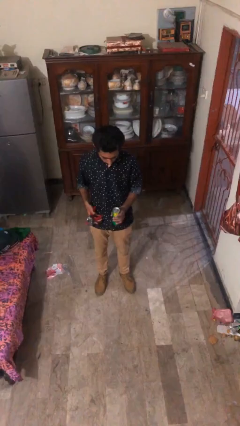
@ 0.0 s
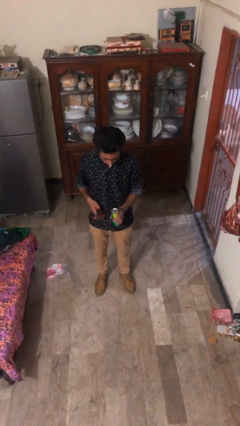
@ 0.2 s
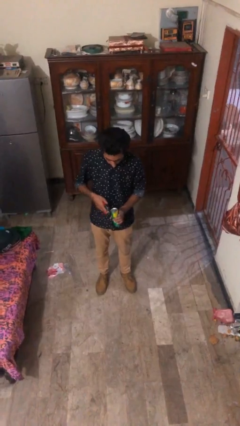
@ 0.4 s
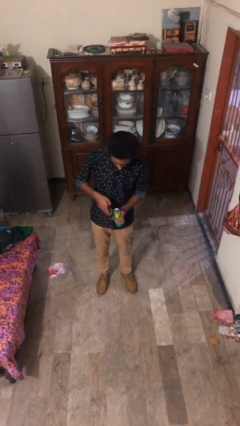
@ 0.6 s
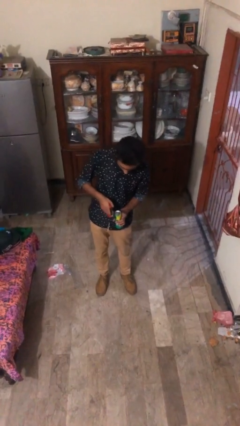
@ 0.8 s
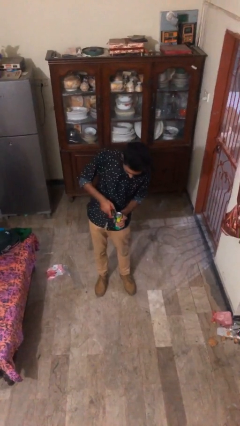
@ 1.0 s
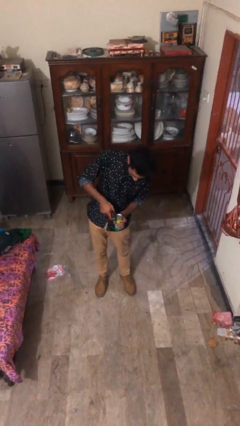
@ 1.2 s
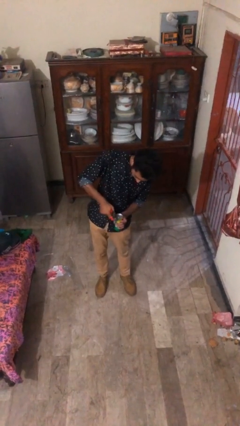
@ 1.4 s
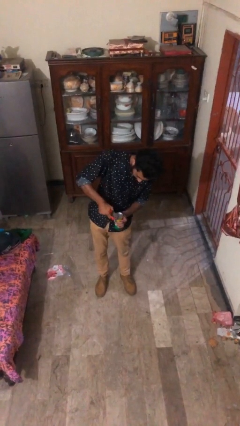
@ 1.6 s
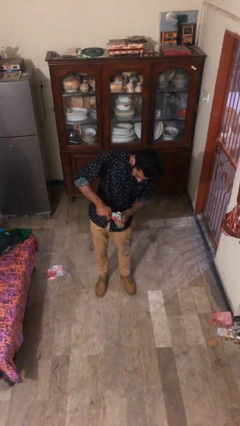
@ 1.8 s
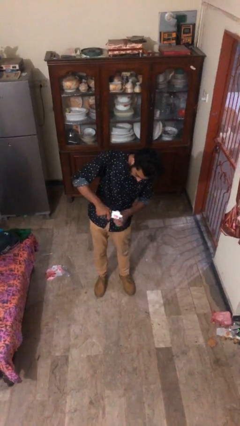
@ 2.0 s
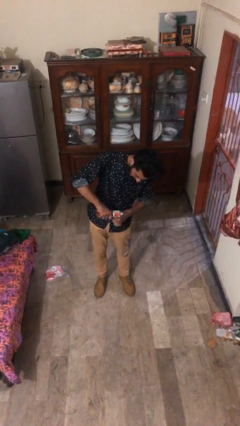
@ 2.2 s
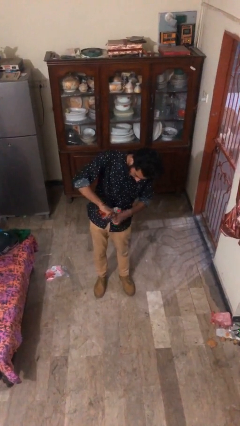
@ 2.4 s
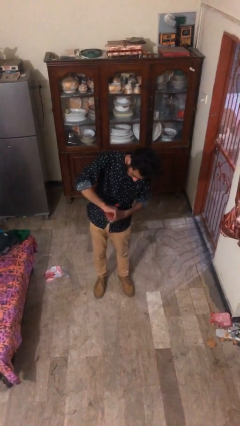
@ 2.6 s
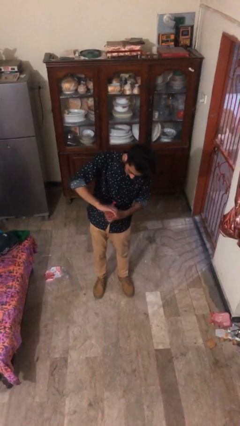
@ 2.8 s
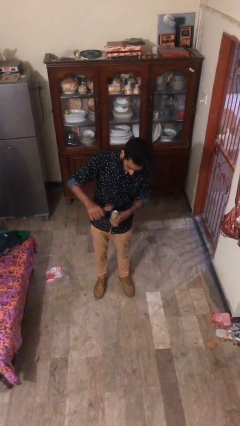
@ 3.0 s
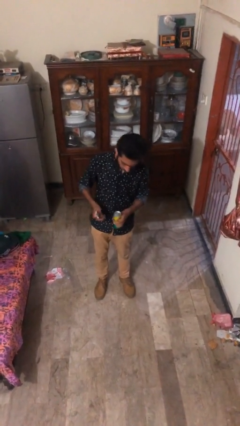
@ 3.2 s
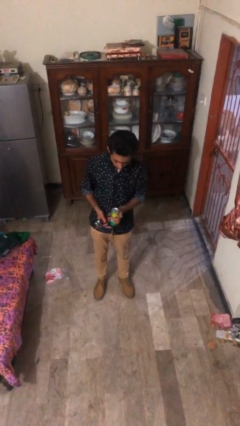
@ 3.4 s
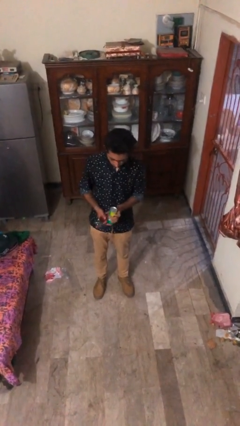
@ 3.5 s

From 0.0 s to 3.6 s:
person opens can with can opener

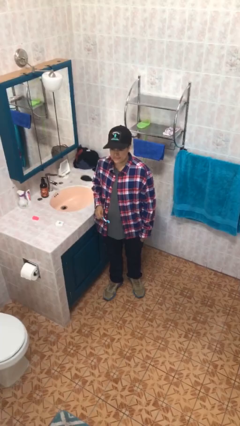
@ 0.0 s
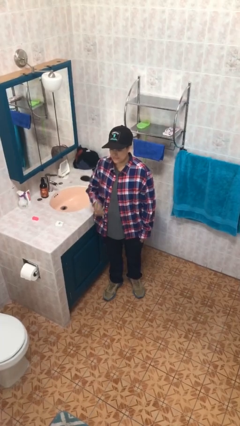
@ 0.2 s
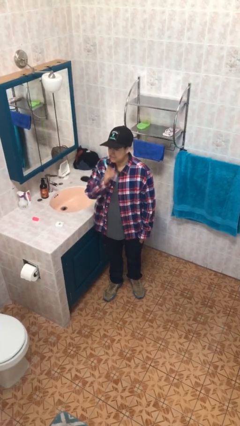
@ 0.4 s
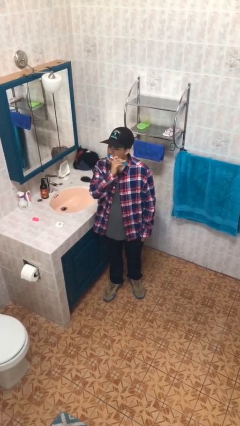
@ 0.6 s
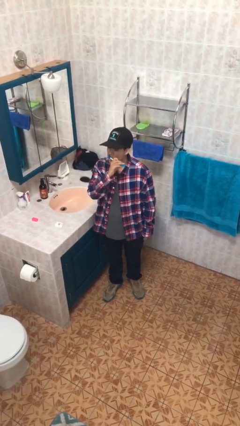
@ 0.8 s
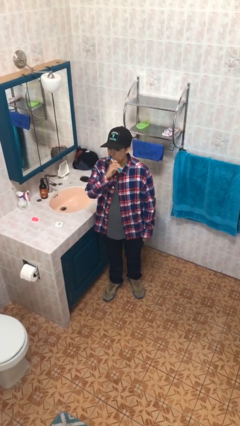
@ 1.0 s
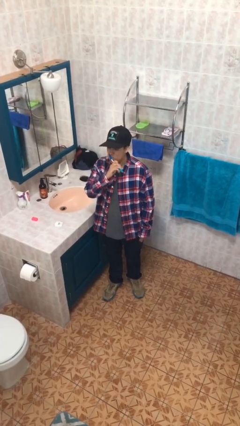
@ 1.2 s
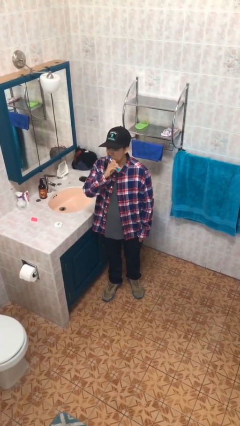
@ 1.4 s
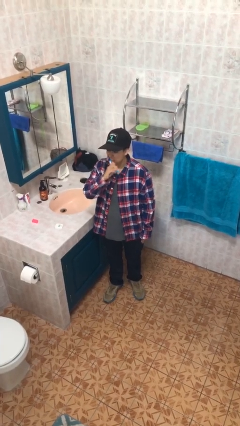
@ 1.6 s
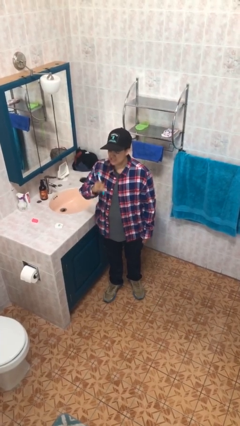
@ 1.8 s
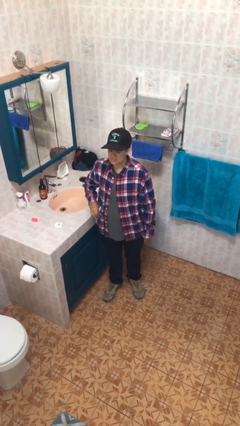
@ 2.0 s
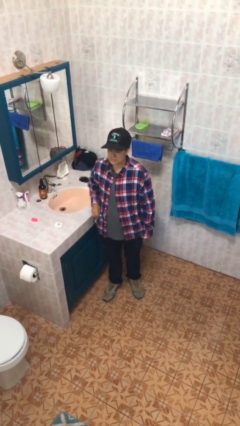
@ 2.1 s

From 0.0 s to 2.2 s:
person brushes teeth

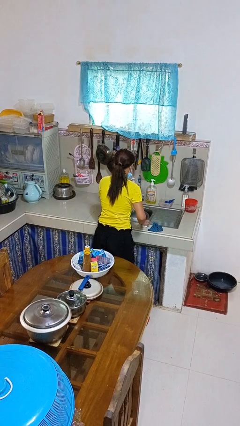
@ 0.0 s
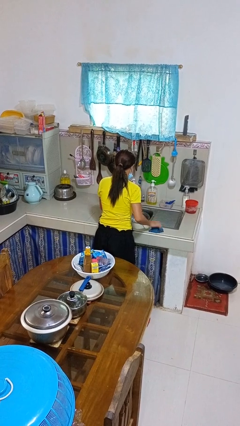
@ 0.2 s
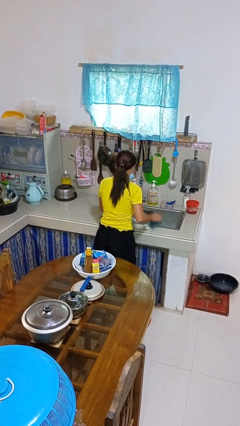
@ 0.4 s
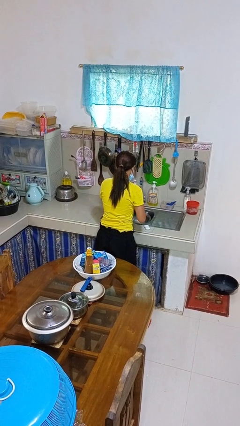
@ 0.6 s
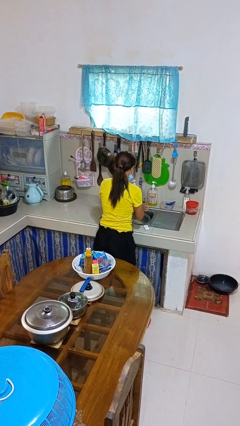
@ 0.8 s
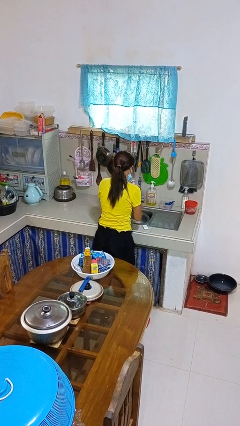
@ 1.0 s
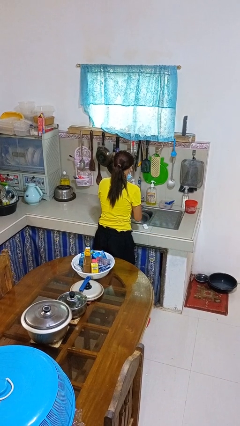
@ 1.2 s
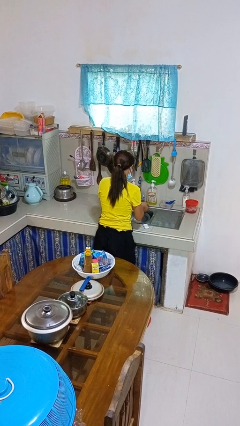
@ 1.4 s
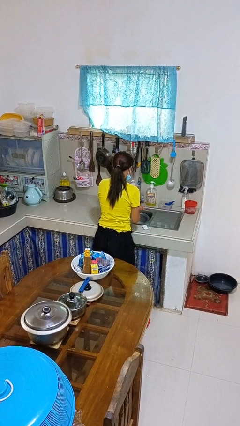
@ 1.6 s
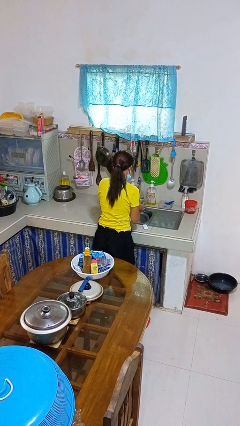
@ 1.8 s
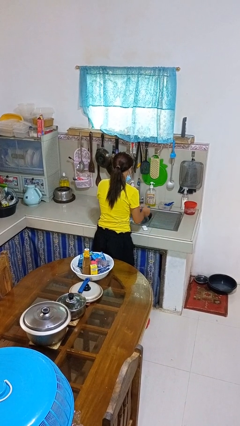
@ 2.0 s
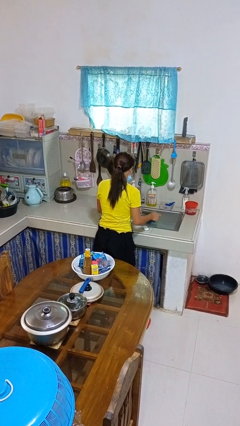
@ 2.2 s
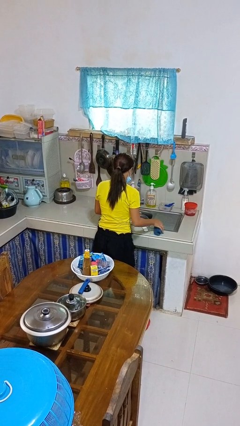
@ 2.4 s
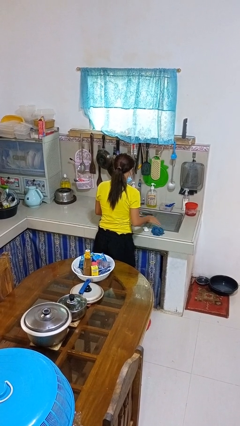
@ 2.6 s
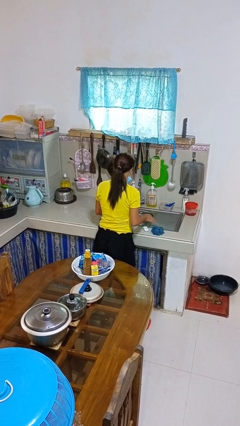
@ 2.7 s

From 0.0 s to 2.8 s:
person dries hands with towel

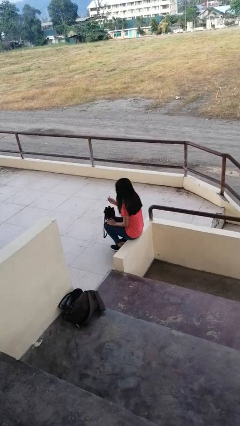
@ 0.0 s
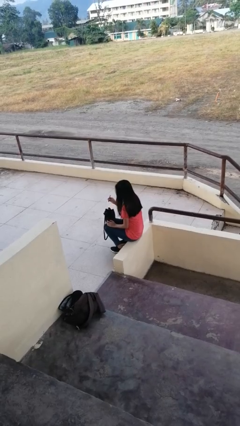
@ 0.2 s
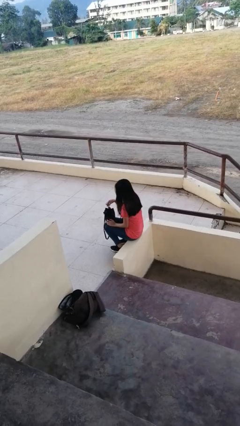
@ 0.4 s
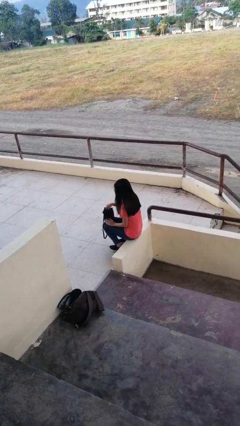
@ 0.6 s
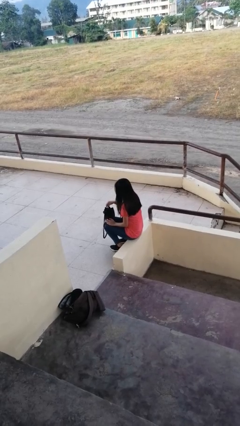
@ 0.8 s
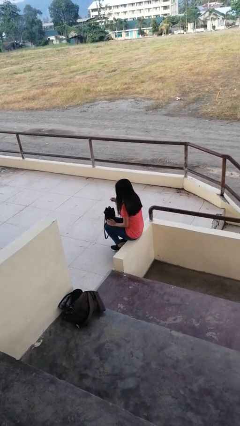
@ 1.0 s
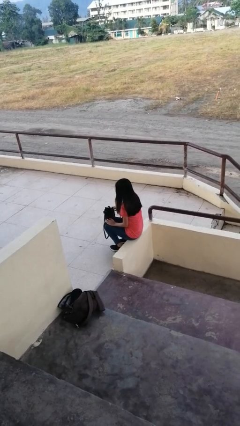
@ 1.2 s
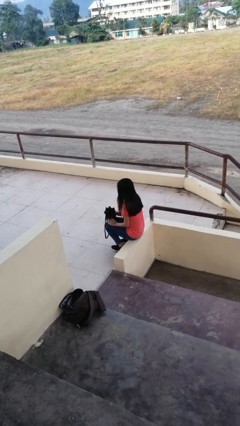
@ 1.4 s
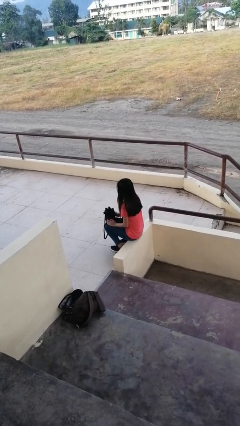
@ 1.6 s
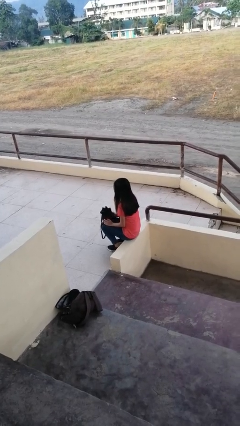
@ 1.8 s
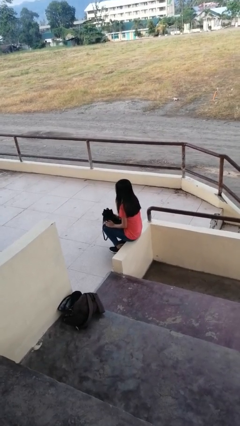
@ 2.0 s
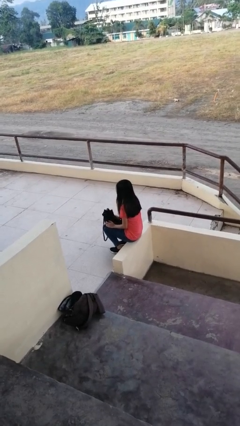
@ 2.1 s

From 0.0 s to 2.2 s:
person puts object into purse

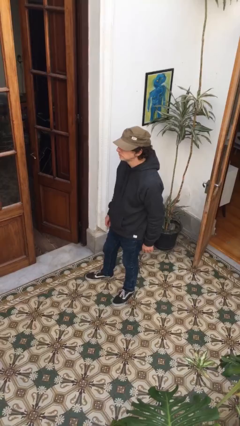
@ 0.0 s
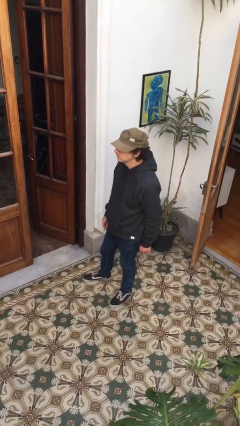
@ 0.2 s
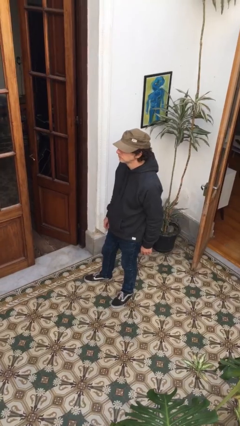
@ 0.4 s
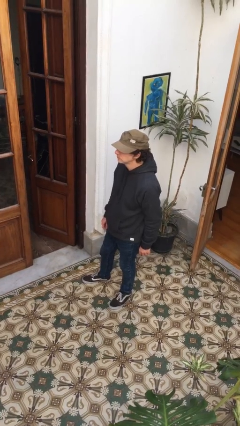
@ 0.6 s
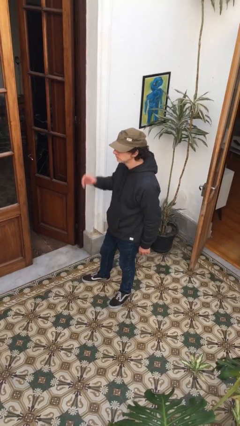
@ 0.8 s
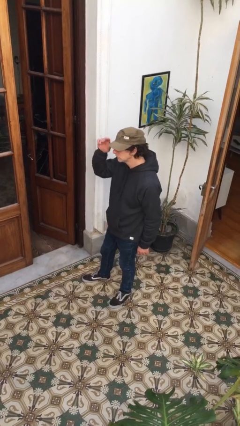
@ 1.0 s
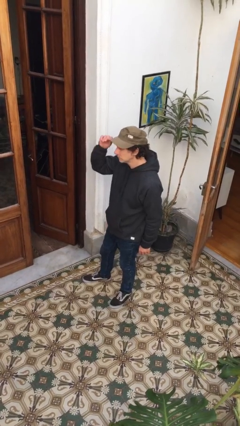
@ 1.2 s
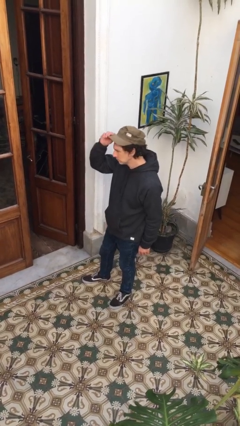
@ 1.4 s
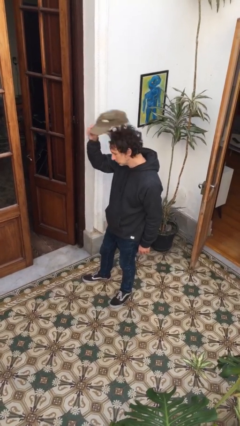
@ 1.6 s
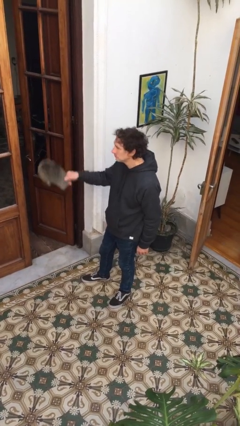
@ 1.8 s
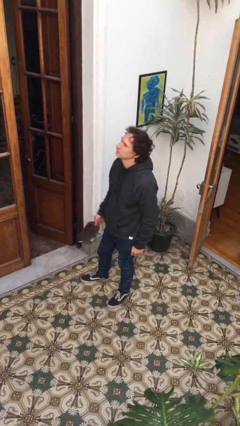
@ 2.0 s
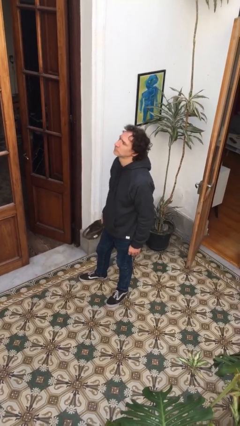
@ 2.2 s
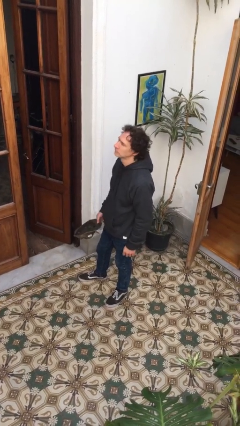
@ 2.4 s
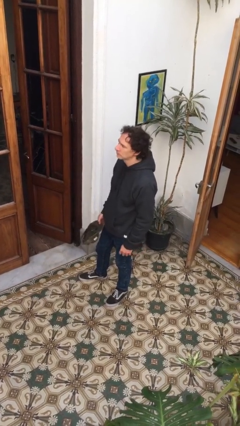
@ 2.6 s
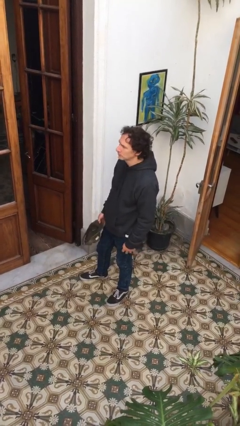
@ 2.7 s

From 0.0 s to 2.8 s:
person takes off hat

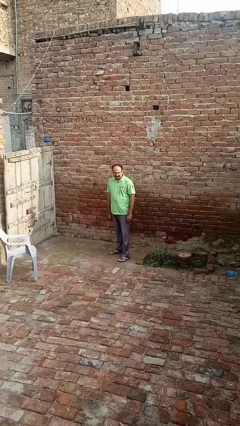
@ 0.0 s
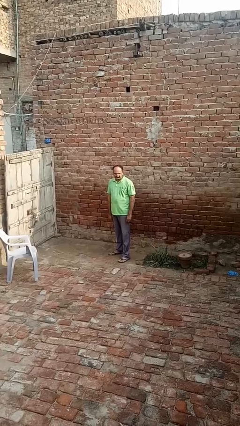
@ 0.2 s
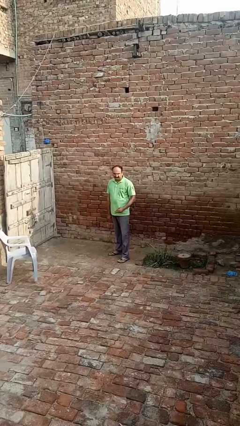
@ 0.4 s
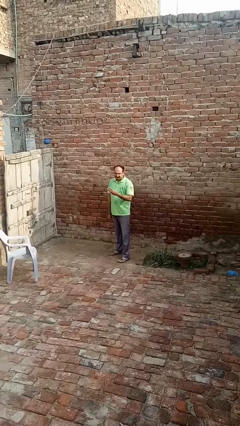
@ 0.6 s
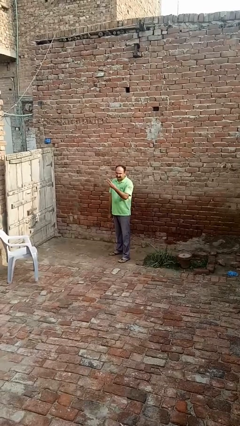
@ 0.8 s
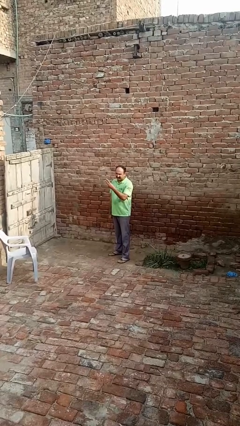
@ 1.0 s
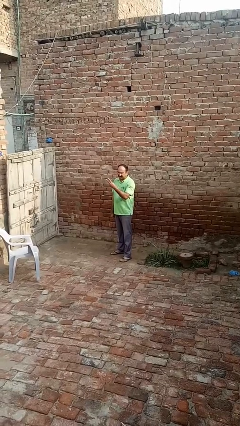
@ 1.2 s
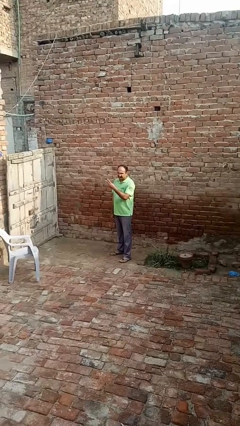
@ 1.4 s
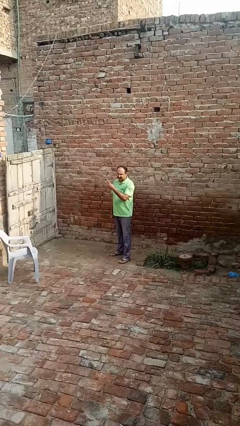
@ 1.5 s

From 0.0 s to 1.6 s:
person gestures peace

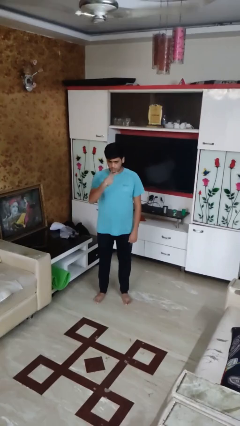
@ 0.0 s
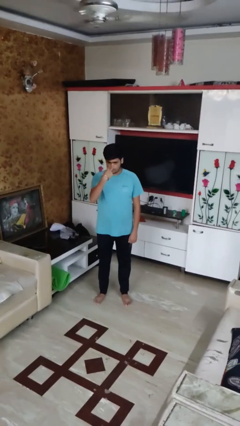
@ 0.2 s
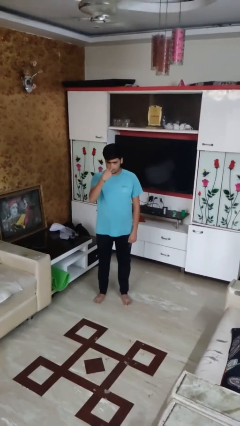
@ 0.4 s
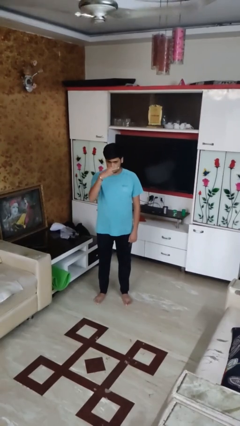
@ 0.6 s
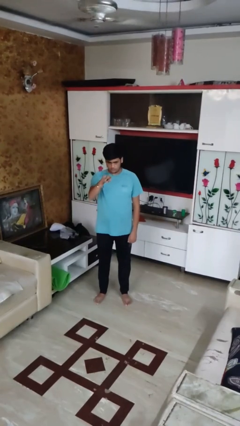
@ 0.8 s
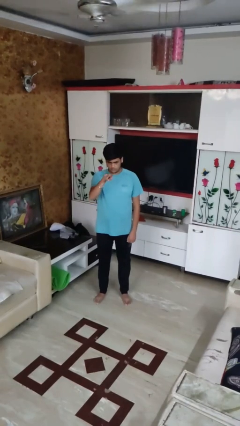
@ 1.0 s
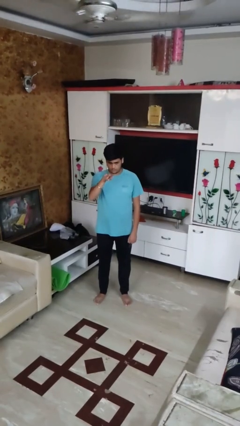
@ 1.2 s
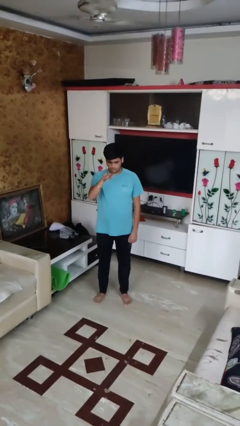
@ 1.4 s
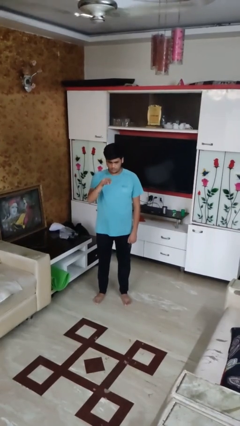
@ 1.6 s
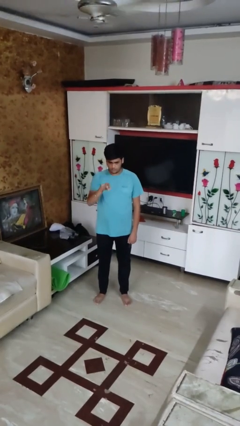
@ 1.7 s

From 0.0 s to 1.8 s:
person gestures watch closely
